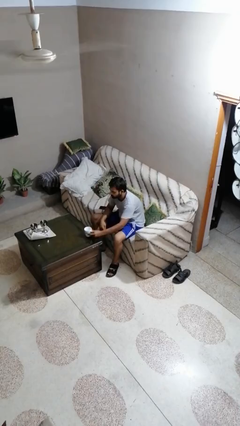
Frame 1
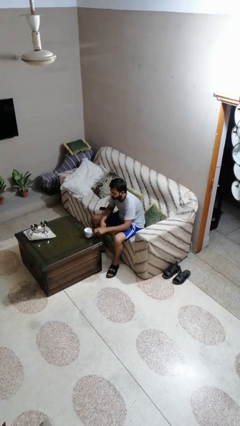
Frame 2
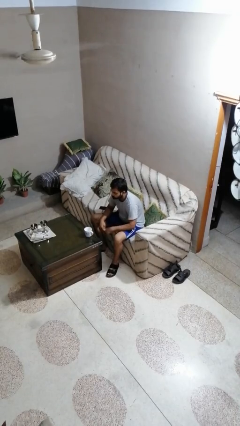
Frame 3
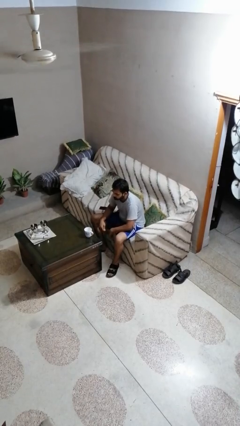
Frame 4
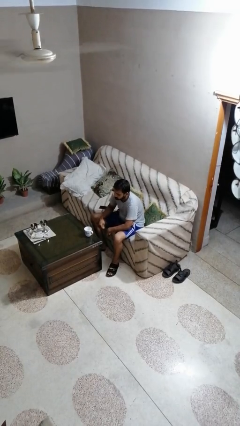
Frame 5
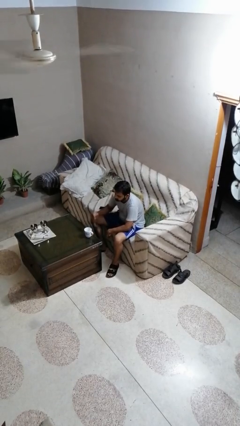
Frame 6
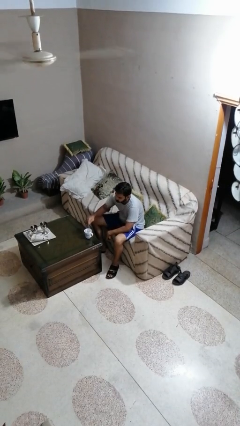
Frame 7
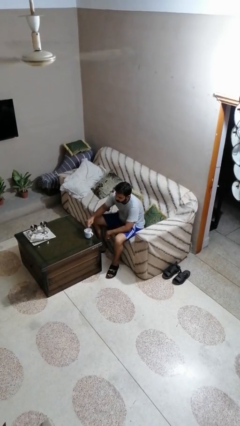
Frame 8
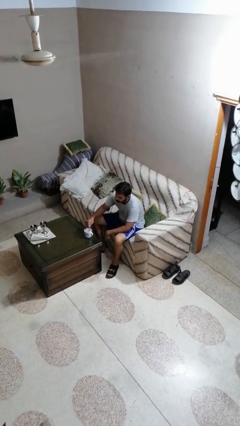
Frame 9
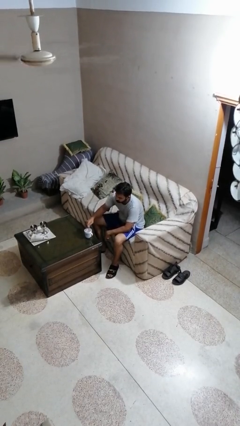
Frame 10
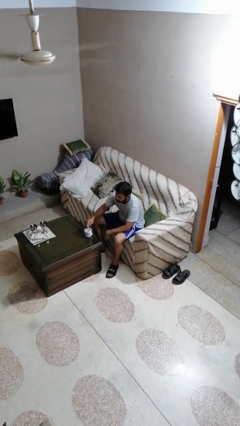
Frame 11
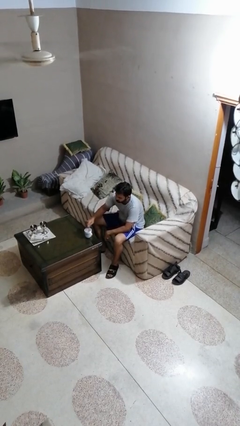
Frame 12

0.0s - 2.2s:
person stirs mug

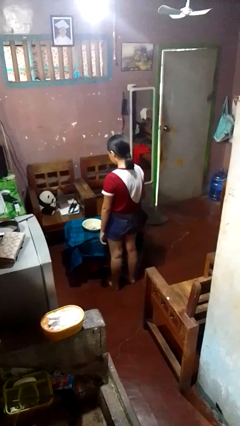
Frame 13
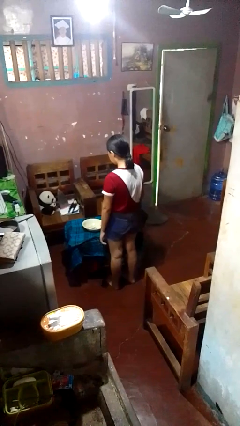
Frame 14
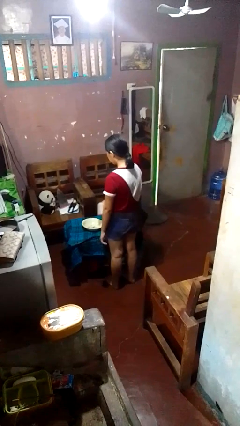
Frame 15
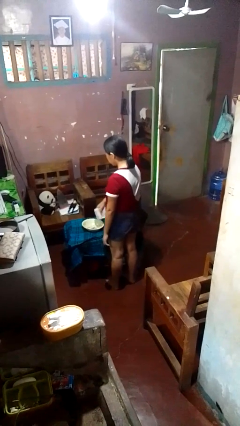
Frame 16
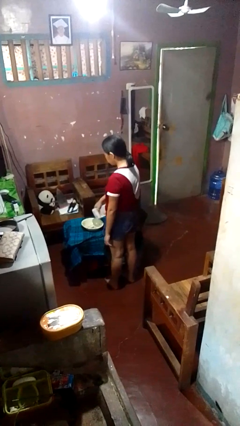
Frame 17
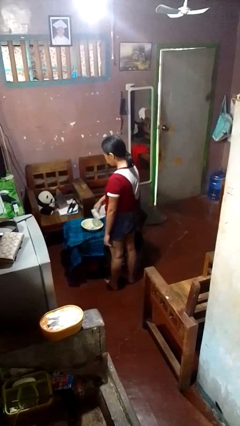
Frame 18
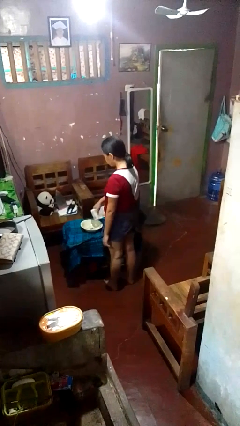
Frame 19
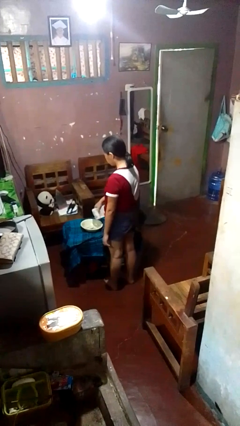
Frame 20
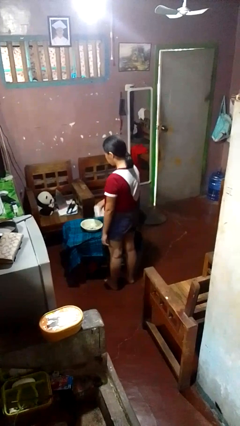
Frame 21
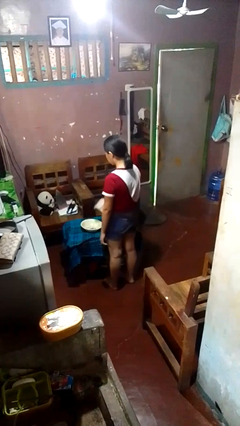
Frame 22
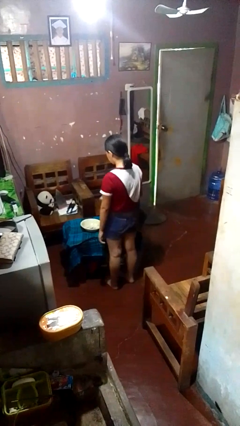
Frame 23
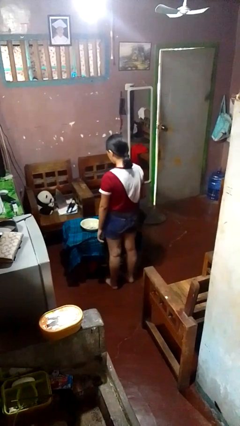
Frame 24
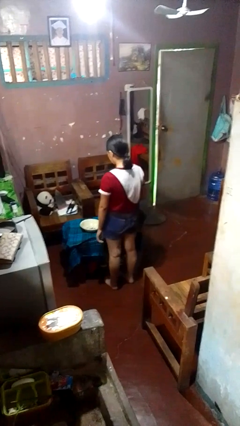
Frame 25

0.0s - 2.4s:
person pours into bowl

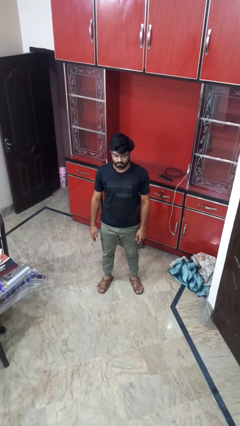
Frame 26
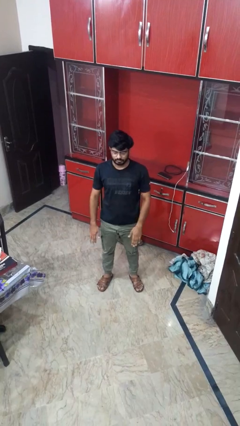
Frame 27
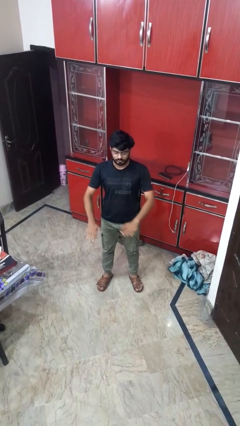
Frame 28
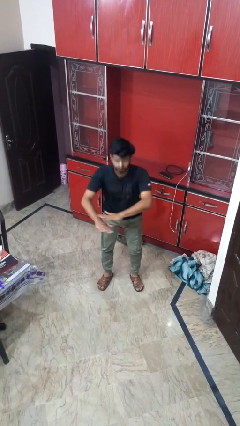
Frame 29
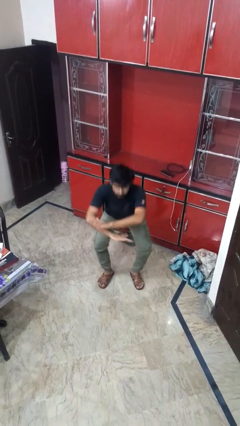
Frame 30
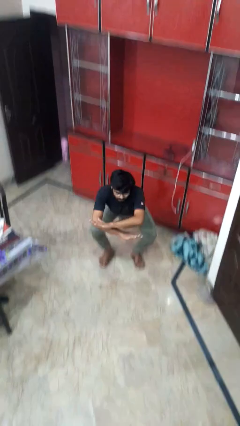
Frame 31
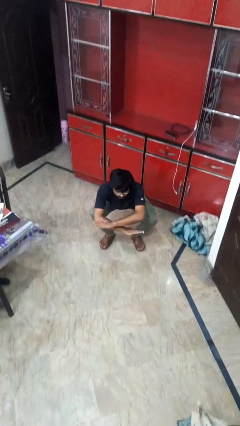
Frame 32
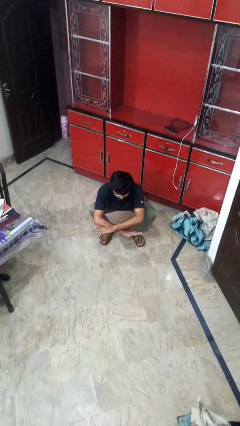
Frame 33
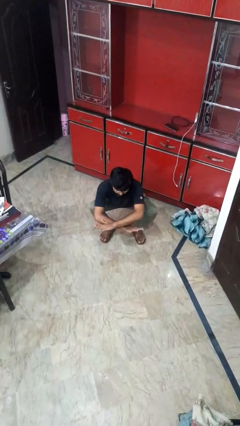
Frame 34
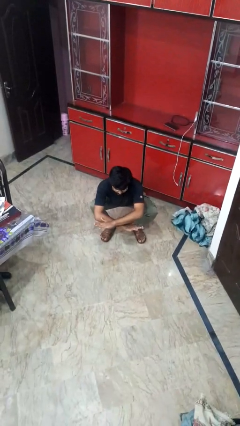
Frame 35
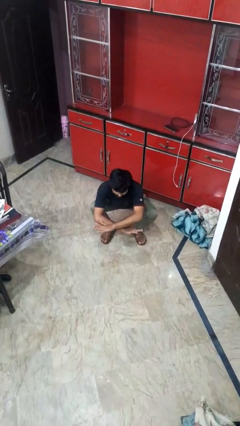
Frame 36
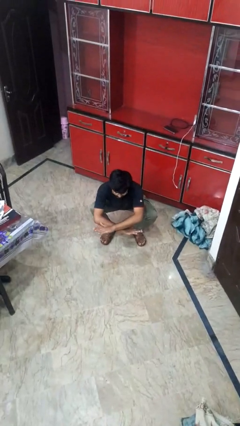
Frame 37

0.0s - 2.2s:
person squats

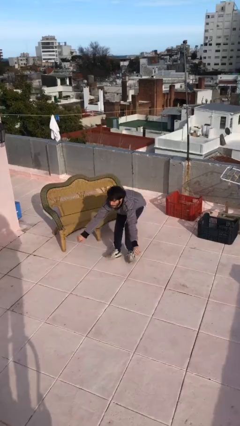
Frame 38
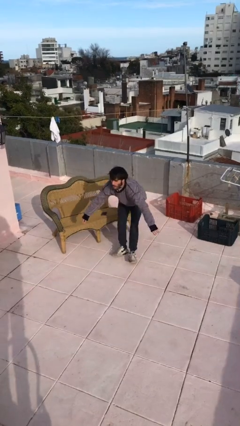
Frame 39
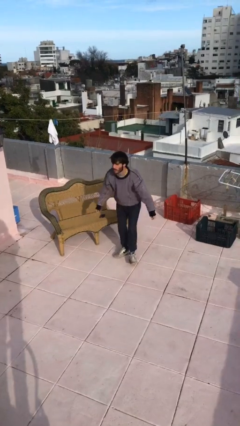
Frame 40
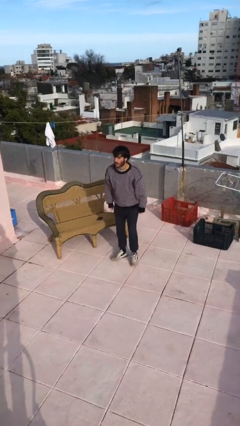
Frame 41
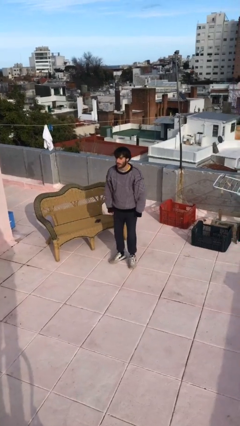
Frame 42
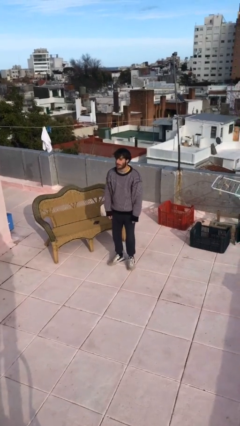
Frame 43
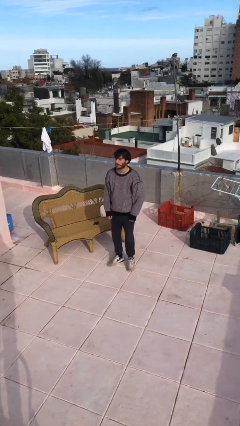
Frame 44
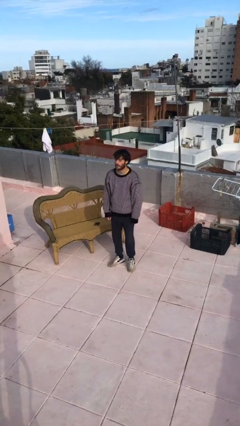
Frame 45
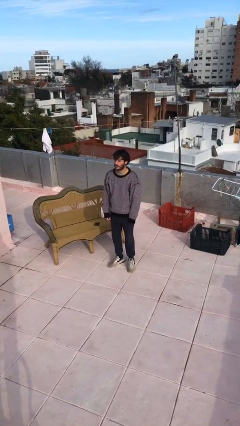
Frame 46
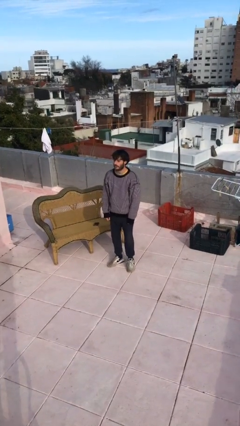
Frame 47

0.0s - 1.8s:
person stands up

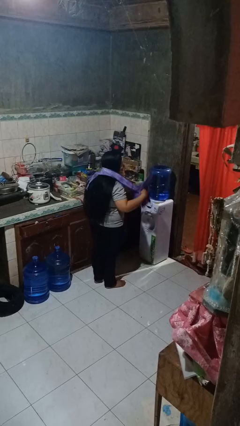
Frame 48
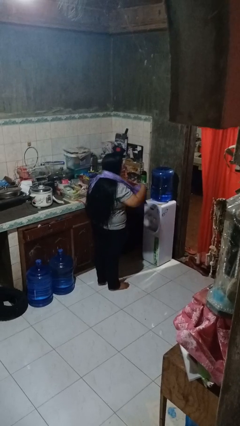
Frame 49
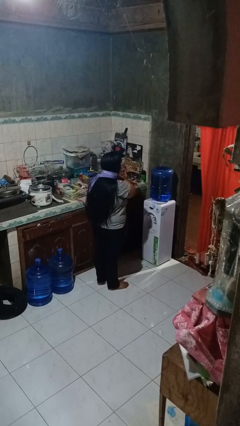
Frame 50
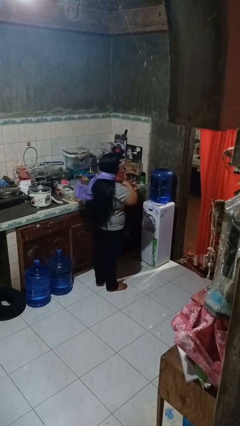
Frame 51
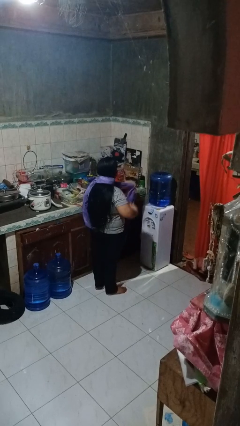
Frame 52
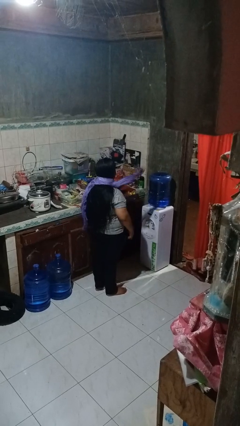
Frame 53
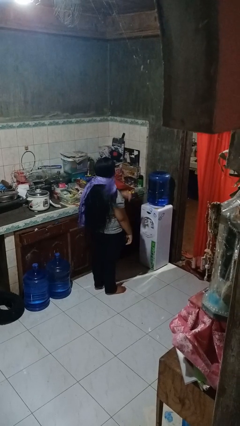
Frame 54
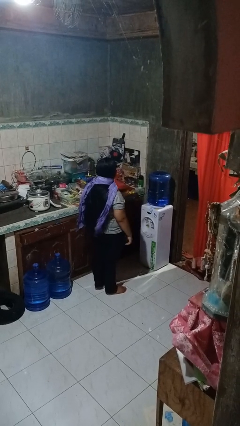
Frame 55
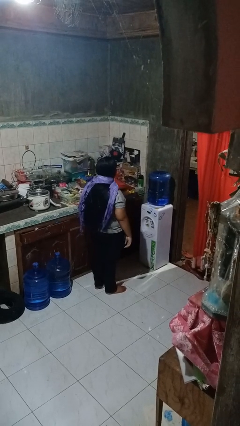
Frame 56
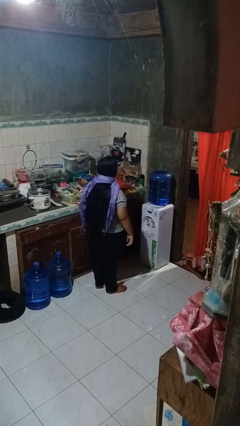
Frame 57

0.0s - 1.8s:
person puts on scarf

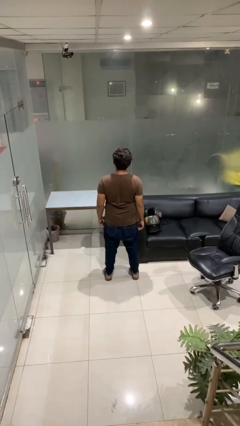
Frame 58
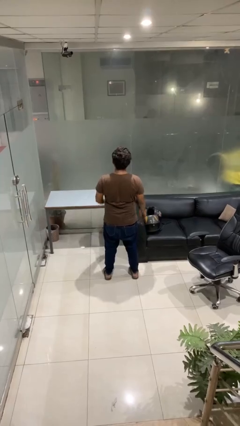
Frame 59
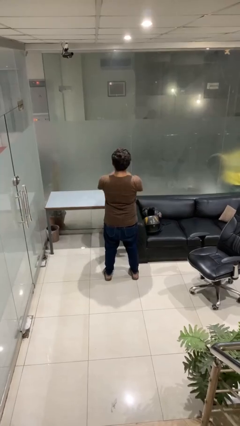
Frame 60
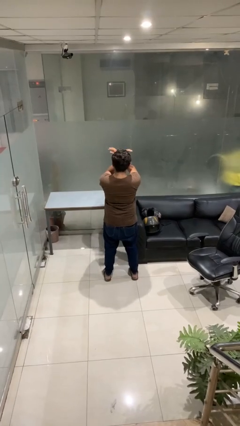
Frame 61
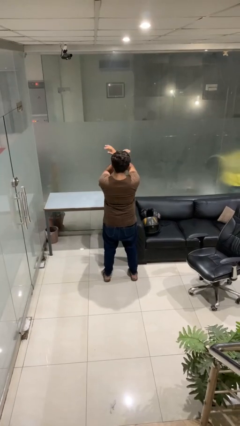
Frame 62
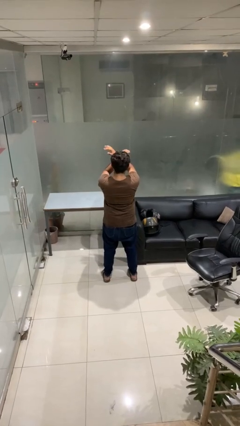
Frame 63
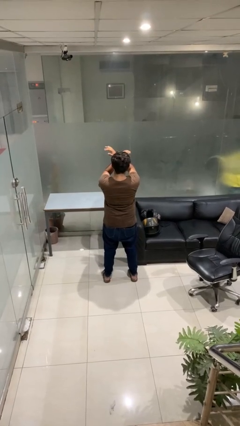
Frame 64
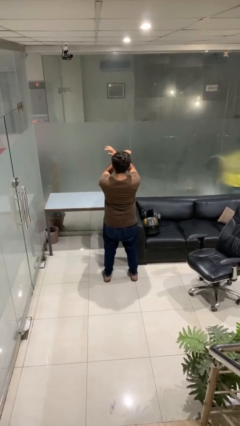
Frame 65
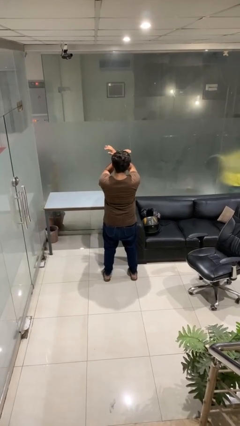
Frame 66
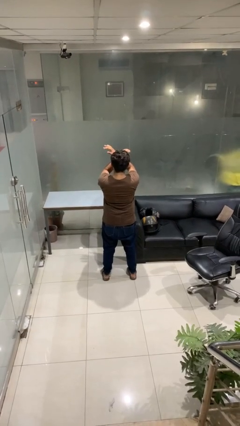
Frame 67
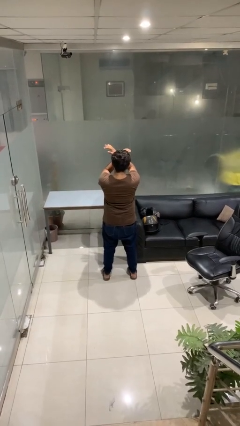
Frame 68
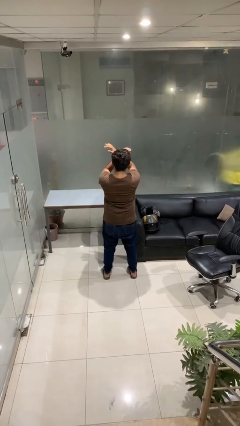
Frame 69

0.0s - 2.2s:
person gestures arms x

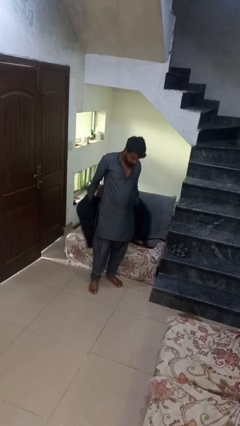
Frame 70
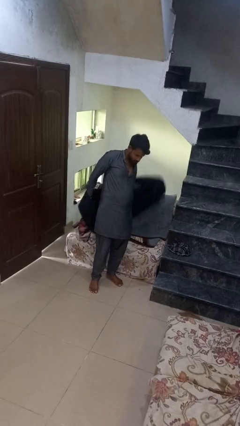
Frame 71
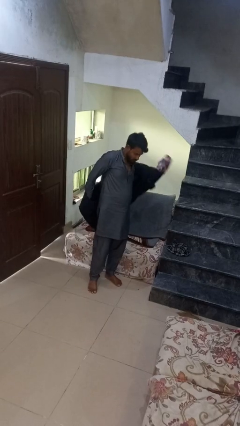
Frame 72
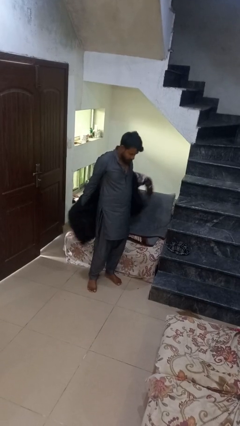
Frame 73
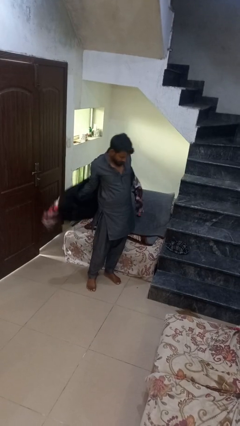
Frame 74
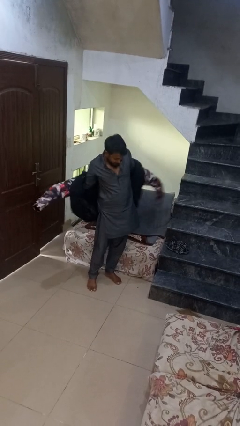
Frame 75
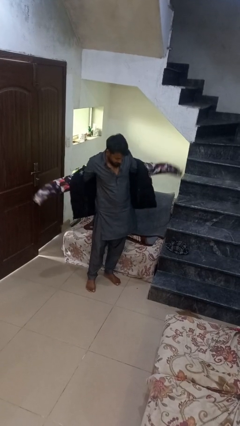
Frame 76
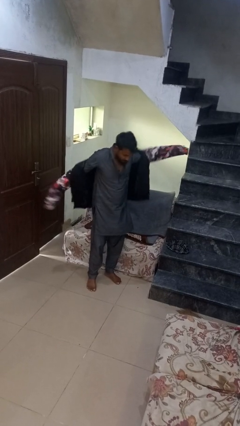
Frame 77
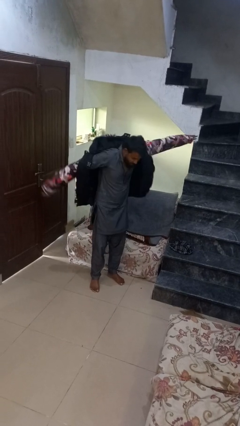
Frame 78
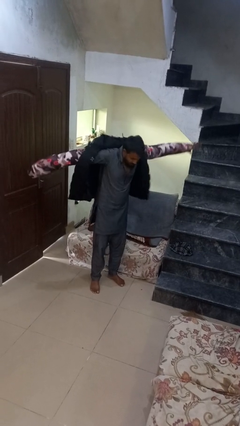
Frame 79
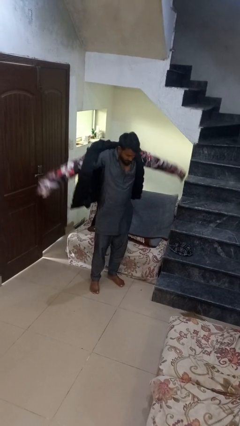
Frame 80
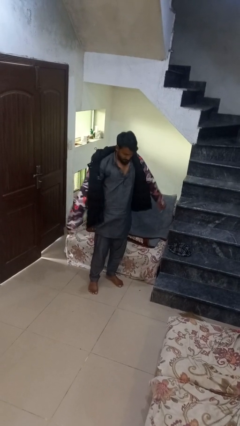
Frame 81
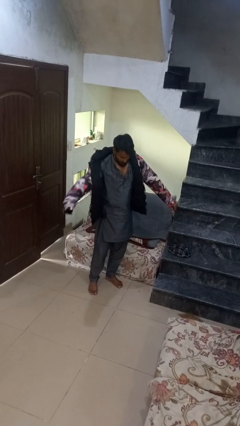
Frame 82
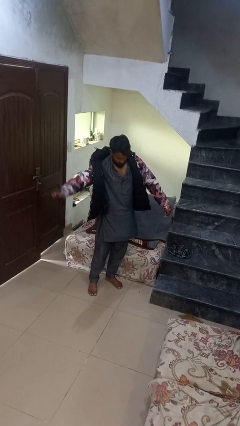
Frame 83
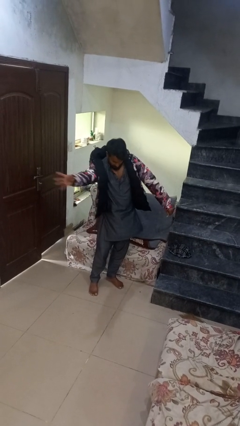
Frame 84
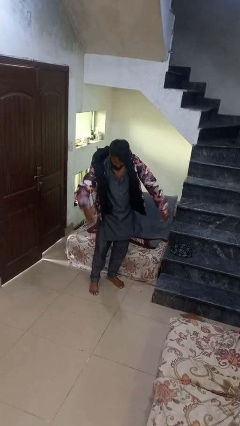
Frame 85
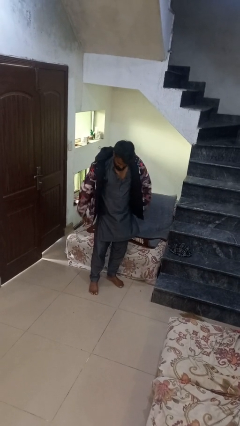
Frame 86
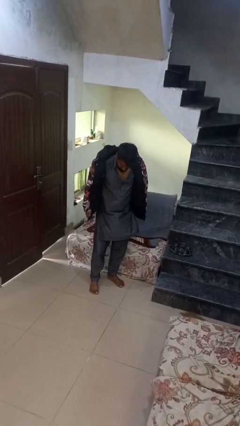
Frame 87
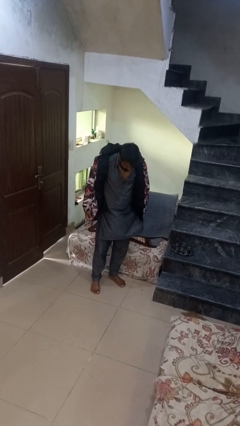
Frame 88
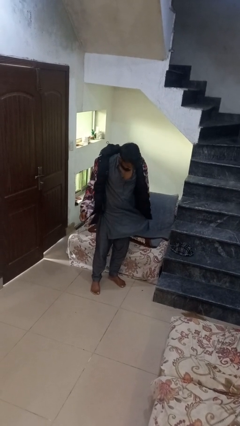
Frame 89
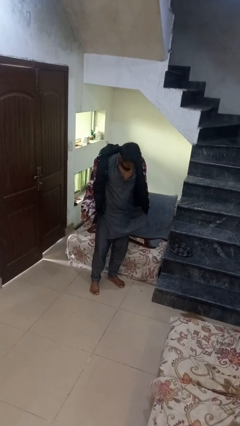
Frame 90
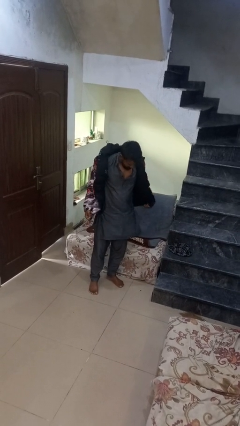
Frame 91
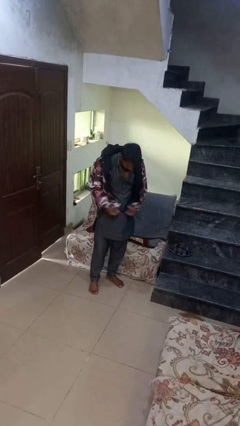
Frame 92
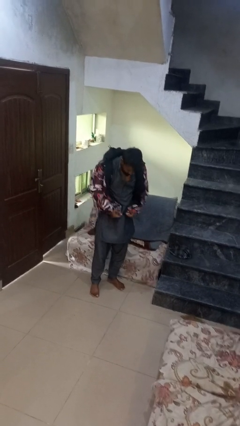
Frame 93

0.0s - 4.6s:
person puts on jacket
